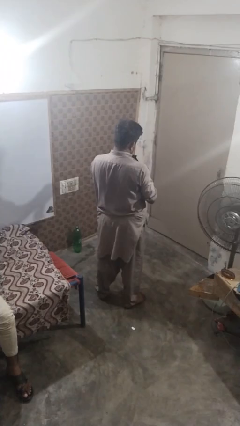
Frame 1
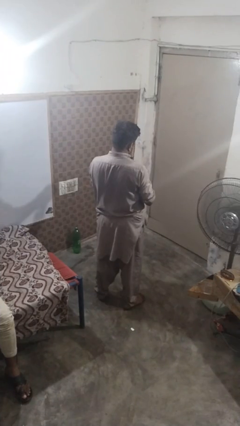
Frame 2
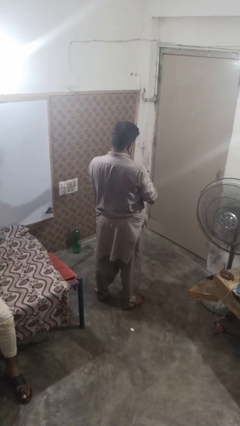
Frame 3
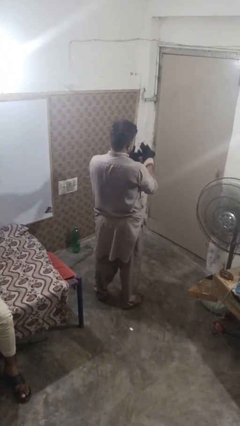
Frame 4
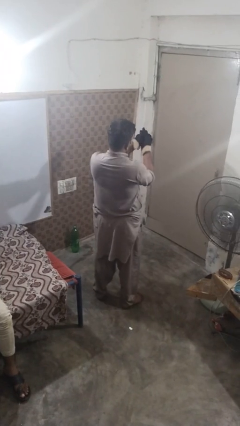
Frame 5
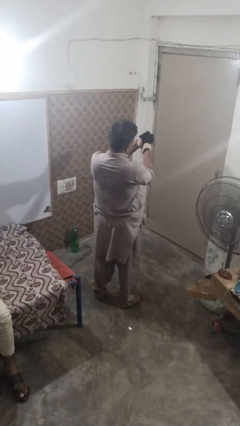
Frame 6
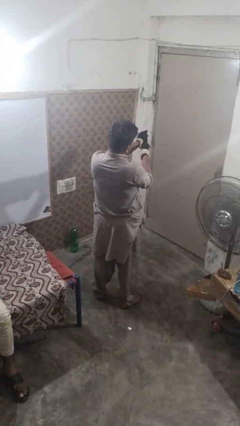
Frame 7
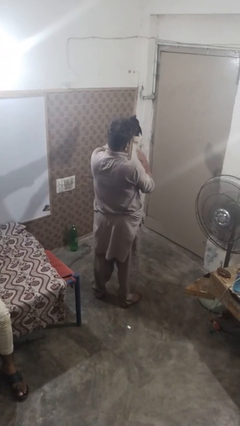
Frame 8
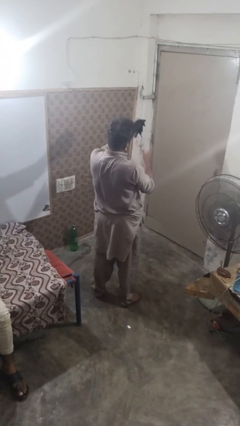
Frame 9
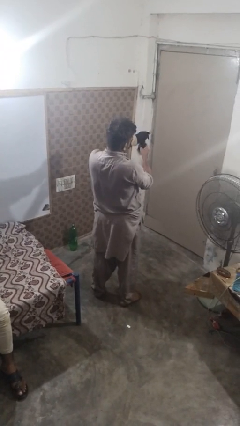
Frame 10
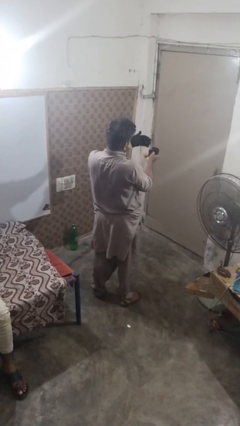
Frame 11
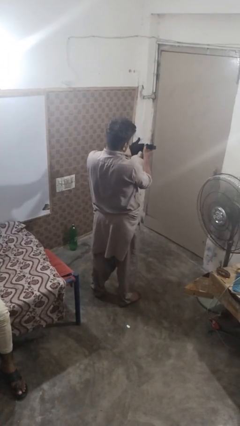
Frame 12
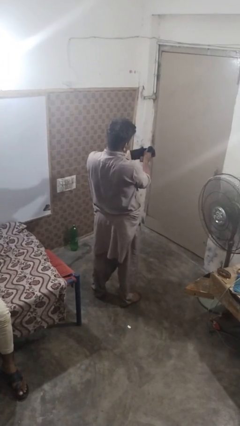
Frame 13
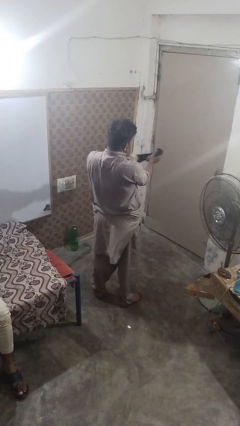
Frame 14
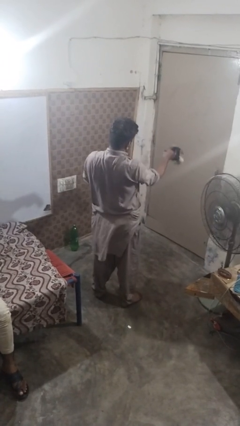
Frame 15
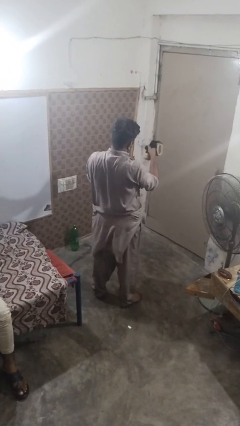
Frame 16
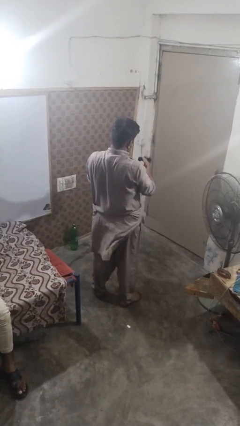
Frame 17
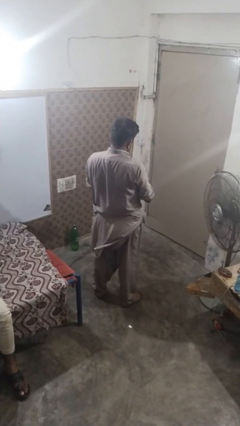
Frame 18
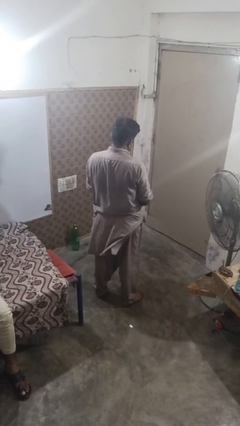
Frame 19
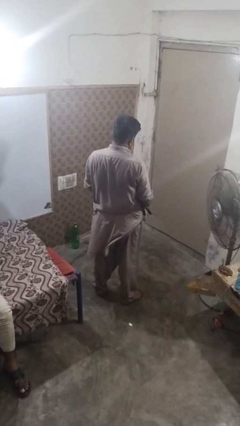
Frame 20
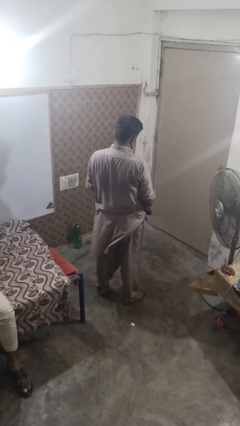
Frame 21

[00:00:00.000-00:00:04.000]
person takes off gloves

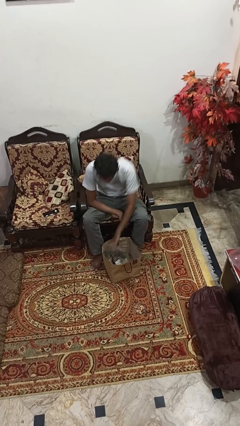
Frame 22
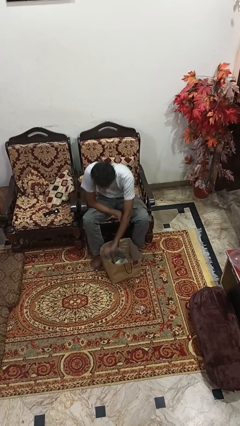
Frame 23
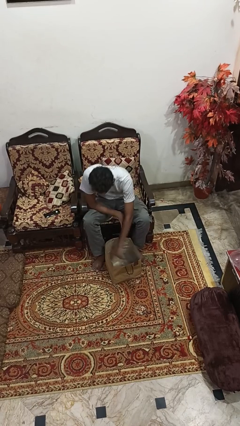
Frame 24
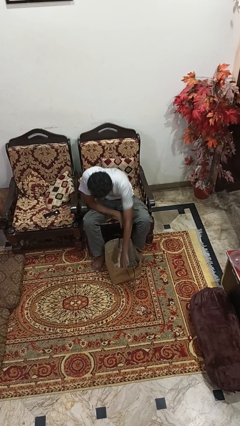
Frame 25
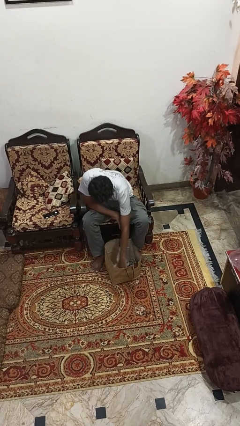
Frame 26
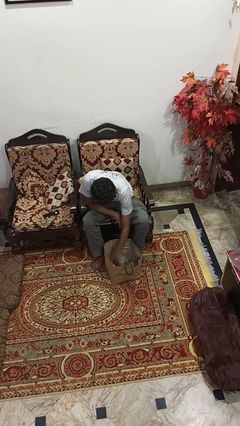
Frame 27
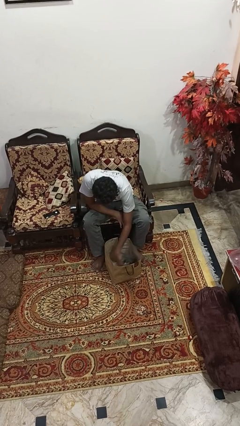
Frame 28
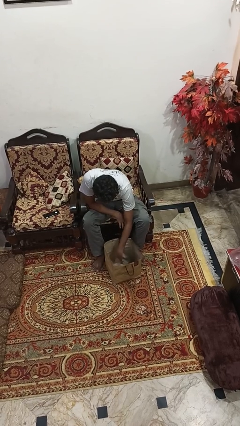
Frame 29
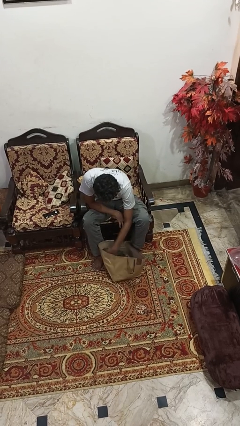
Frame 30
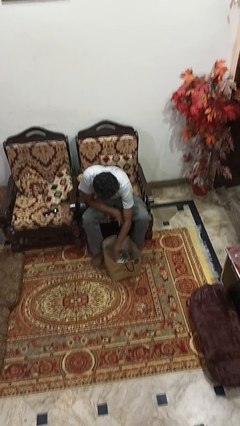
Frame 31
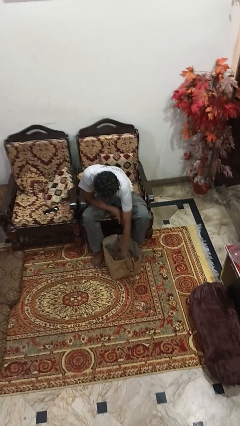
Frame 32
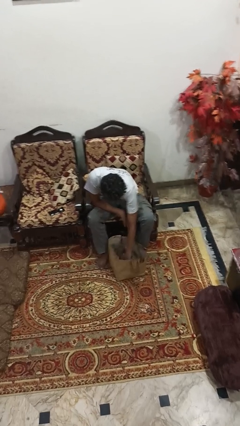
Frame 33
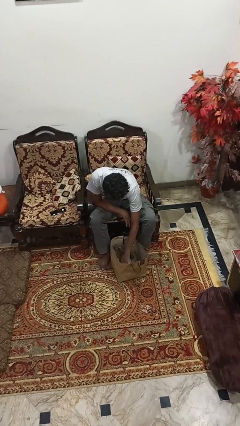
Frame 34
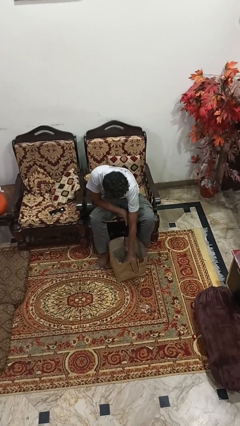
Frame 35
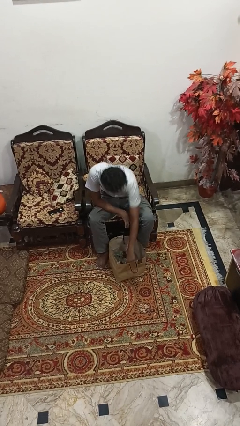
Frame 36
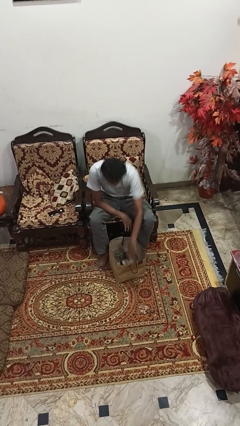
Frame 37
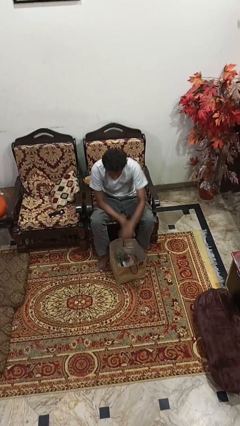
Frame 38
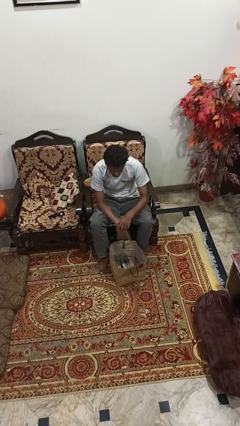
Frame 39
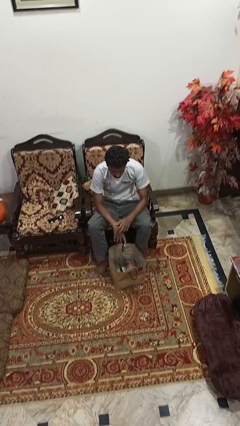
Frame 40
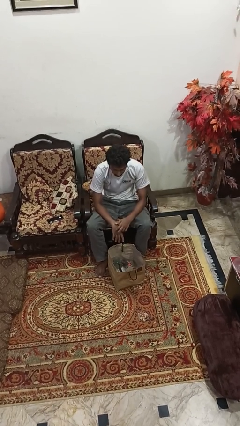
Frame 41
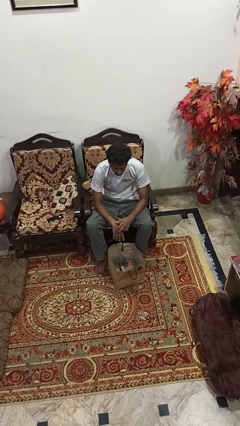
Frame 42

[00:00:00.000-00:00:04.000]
person searches in bag

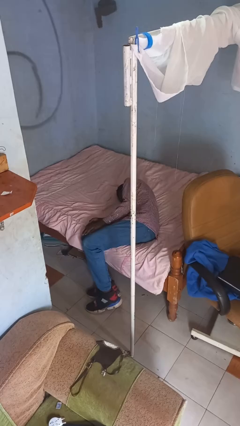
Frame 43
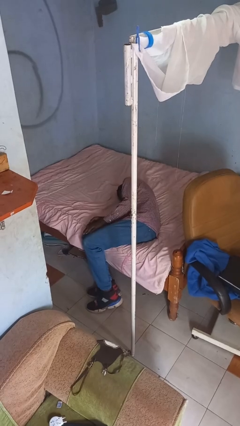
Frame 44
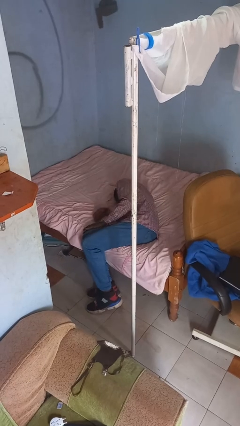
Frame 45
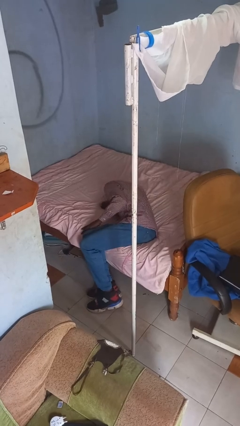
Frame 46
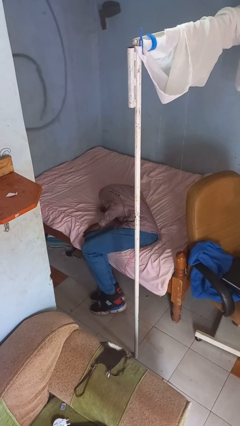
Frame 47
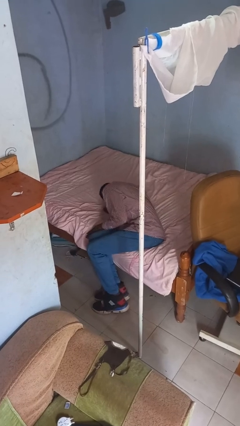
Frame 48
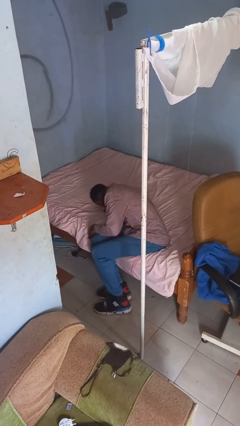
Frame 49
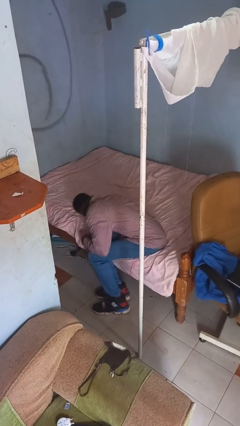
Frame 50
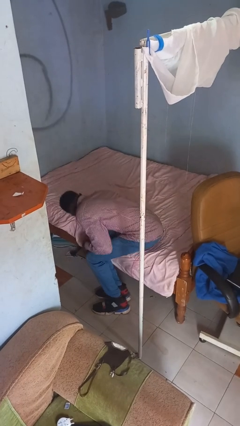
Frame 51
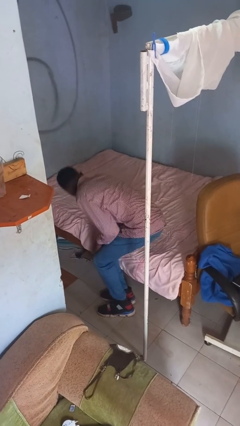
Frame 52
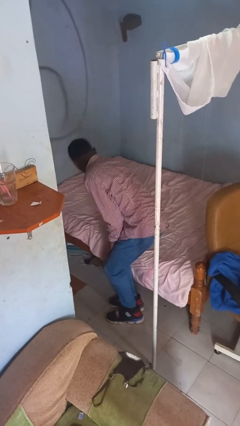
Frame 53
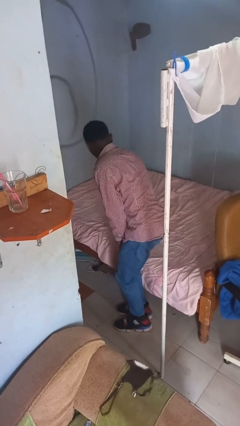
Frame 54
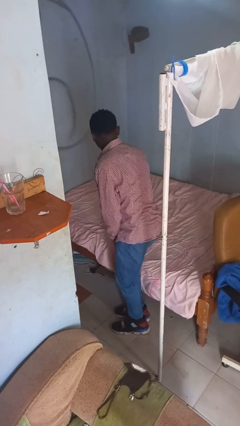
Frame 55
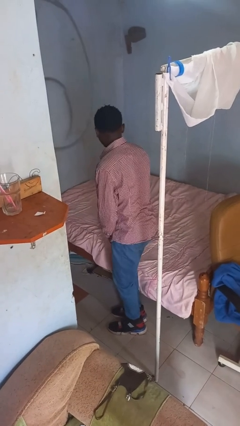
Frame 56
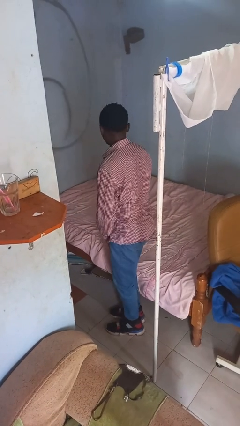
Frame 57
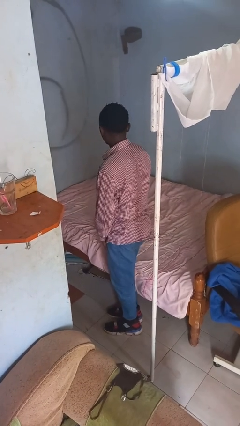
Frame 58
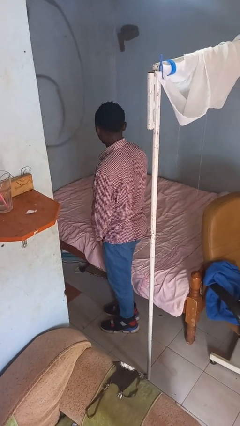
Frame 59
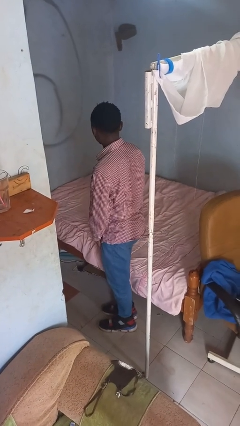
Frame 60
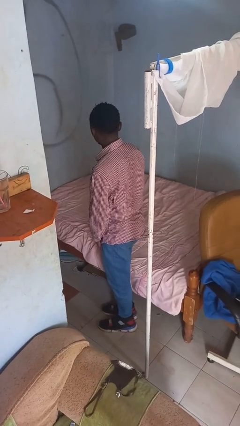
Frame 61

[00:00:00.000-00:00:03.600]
person stands up

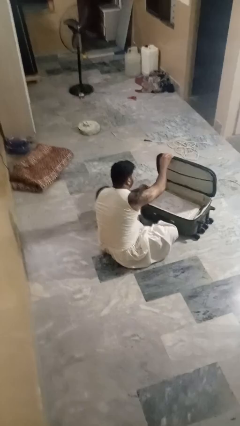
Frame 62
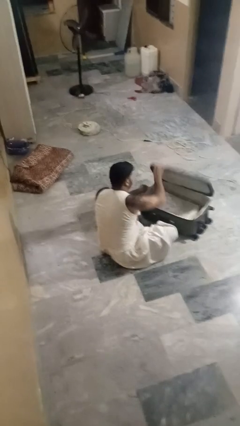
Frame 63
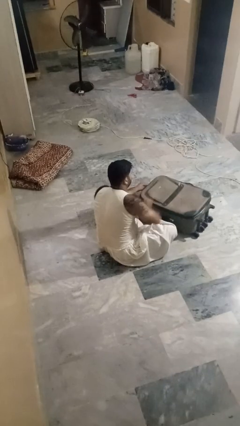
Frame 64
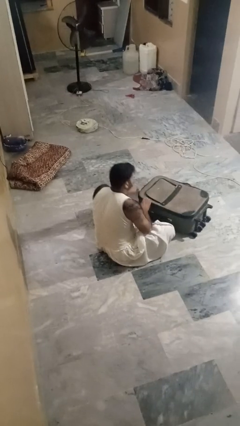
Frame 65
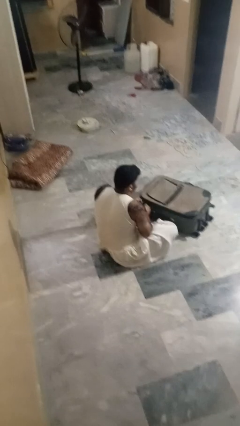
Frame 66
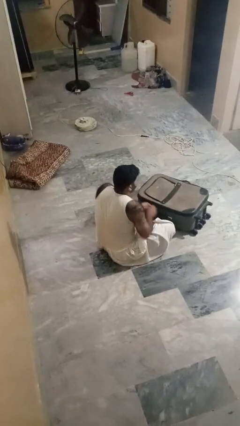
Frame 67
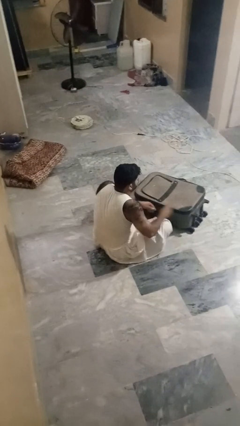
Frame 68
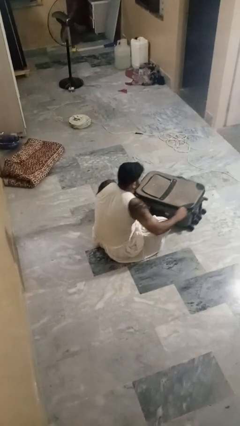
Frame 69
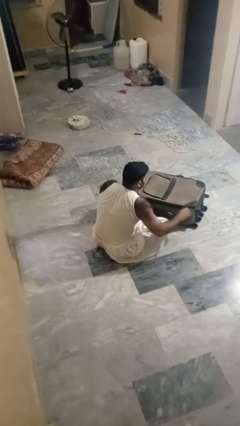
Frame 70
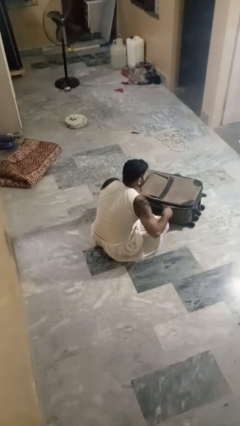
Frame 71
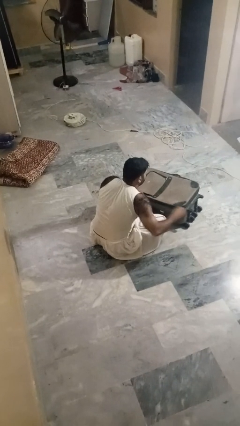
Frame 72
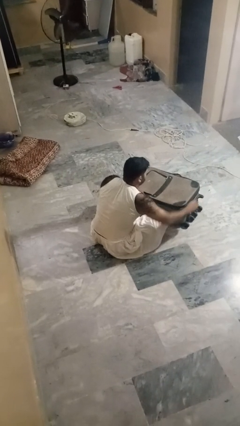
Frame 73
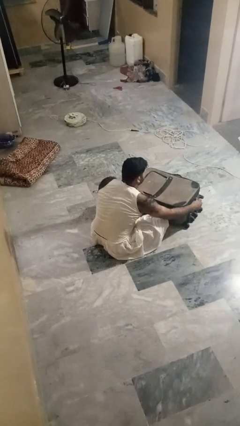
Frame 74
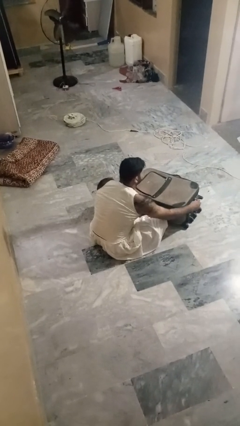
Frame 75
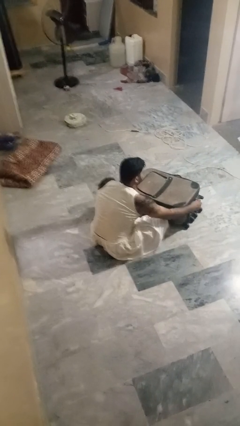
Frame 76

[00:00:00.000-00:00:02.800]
person closes suitcase

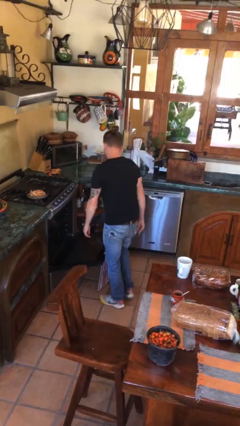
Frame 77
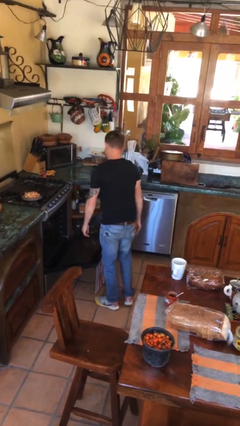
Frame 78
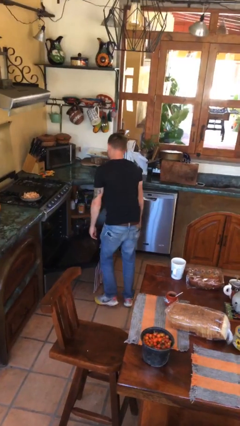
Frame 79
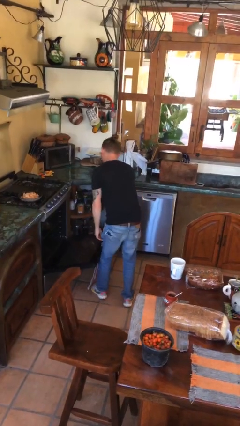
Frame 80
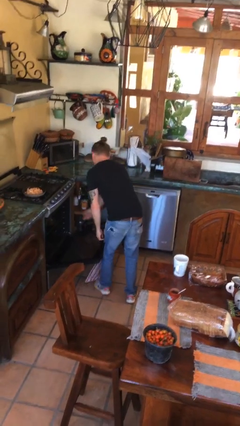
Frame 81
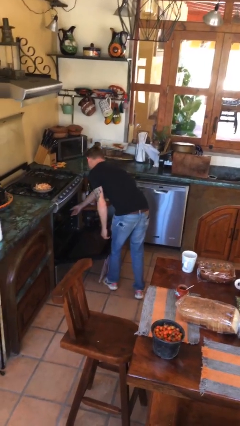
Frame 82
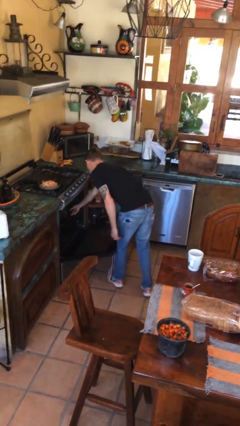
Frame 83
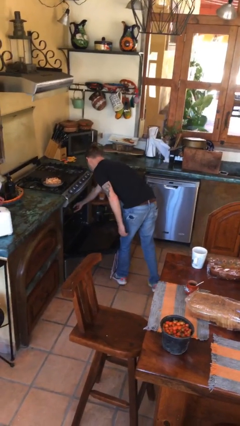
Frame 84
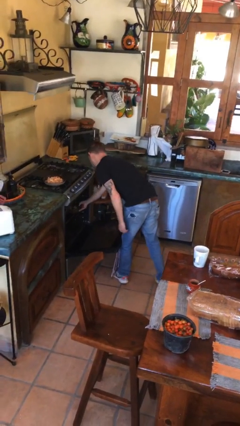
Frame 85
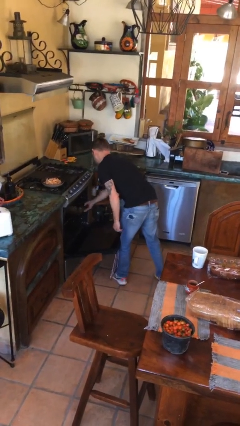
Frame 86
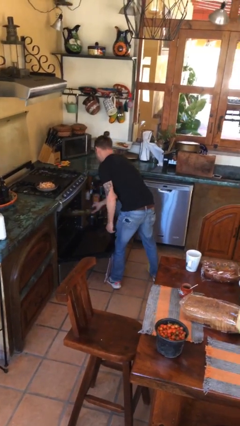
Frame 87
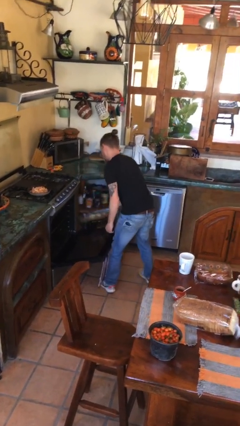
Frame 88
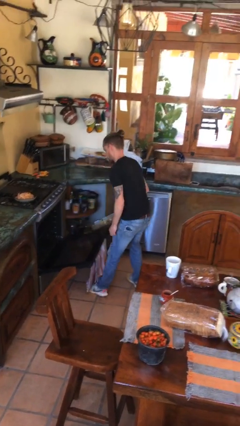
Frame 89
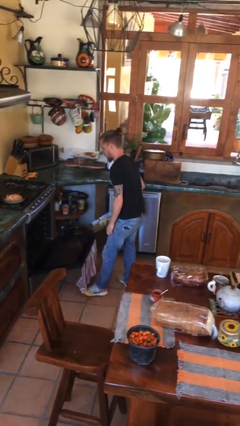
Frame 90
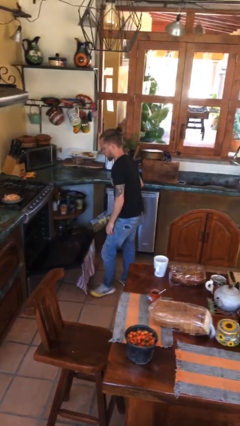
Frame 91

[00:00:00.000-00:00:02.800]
person takes object from oven

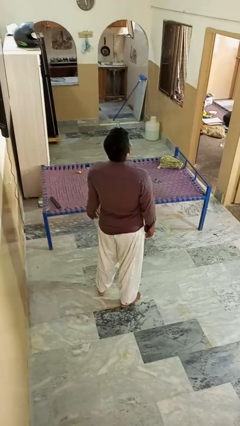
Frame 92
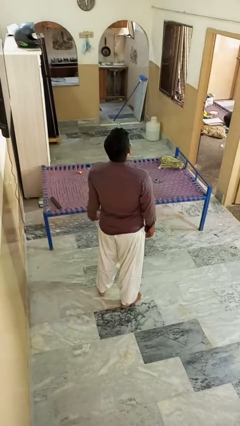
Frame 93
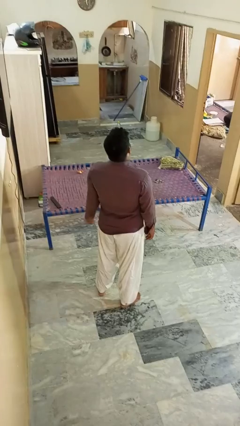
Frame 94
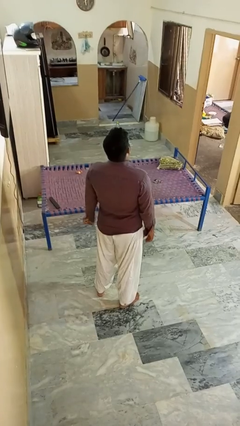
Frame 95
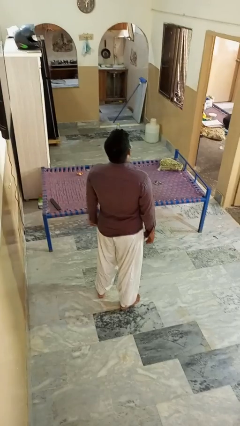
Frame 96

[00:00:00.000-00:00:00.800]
person unbuttons shirt
